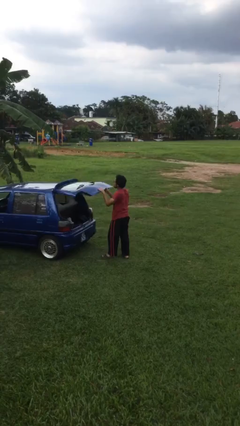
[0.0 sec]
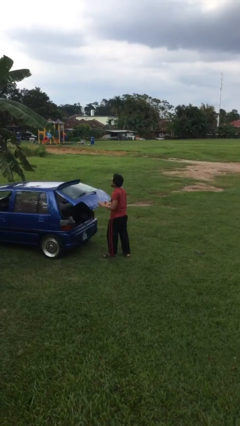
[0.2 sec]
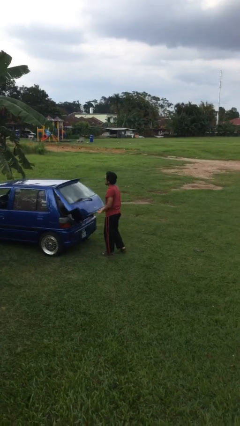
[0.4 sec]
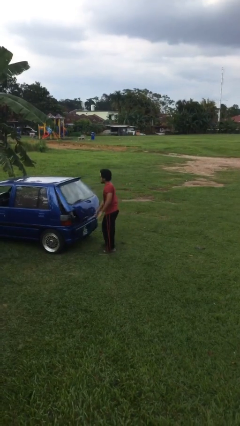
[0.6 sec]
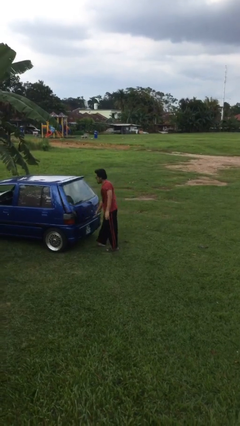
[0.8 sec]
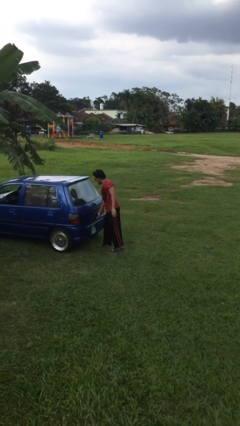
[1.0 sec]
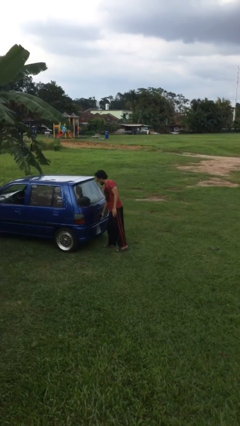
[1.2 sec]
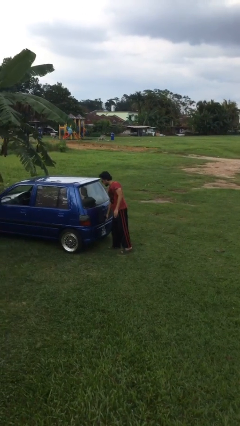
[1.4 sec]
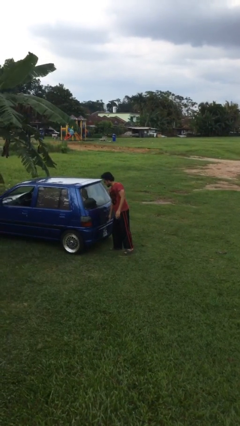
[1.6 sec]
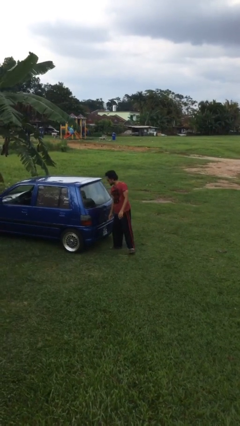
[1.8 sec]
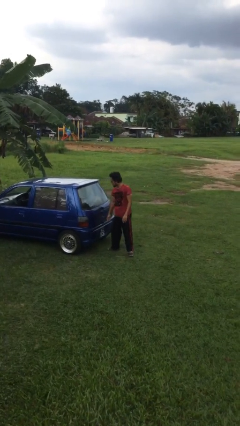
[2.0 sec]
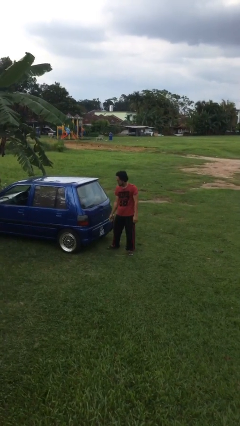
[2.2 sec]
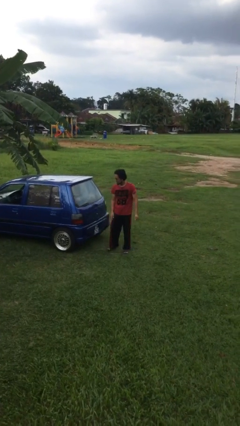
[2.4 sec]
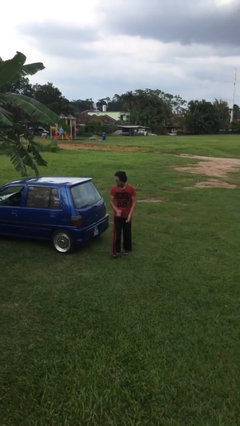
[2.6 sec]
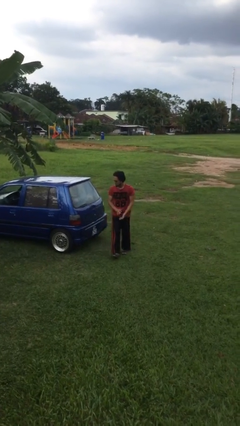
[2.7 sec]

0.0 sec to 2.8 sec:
person closes car trunk

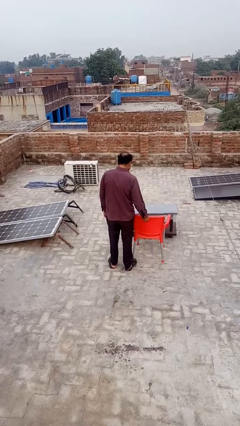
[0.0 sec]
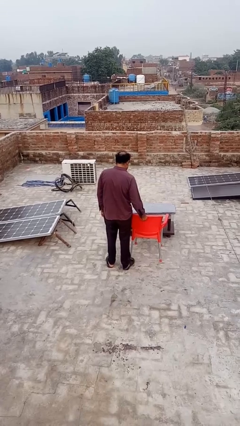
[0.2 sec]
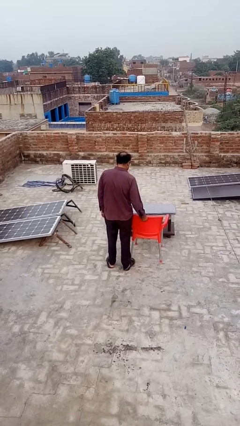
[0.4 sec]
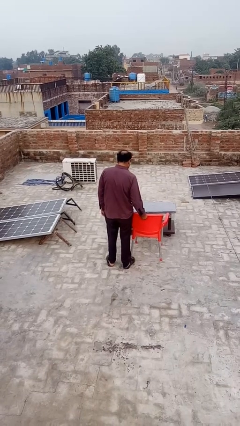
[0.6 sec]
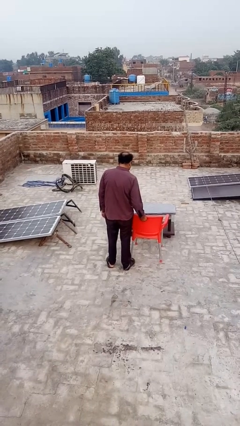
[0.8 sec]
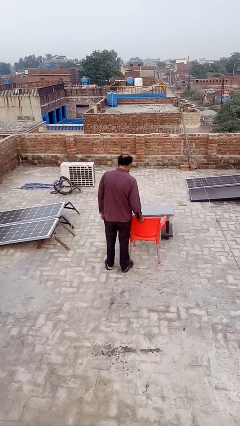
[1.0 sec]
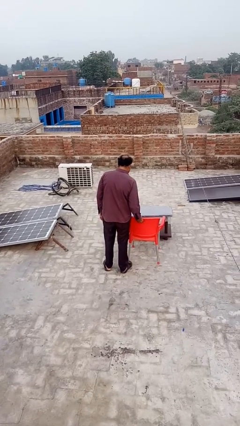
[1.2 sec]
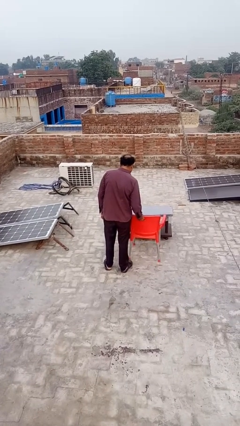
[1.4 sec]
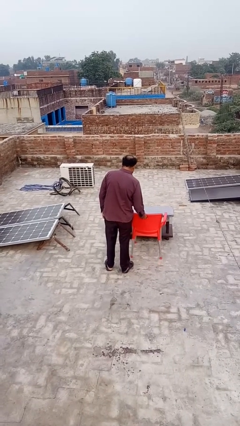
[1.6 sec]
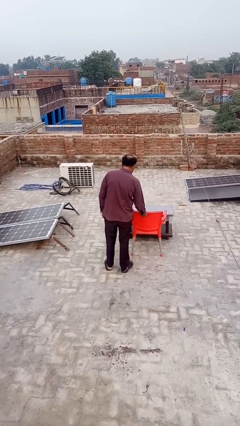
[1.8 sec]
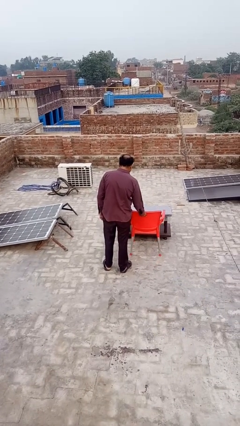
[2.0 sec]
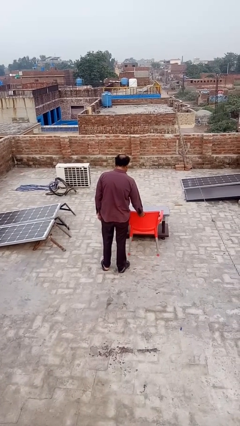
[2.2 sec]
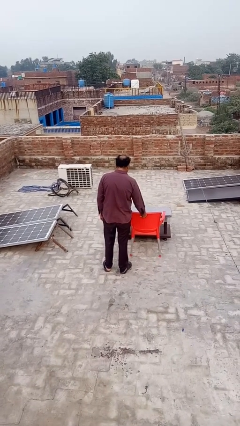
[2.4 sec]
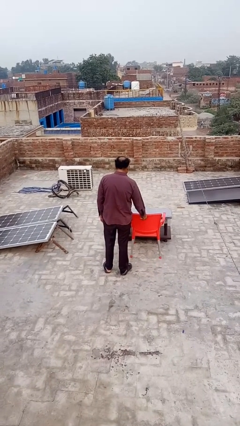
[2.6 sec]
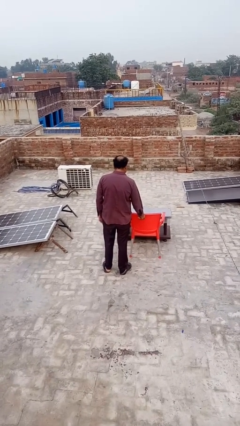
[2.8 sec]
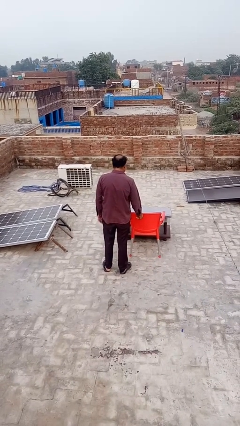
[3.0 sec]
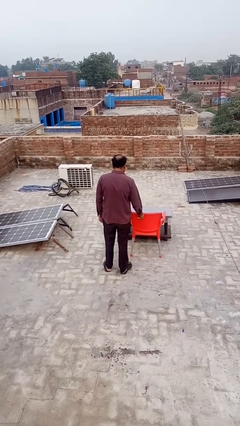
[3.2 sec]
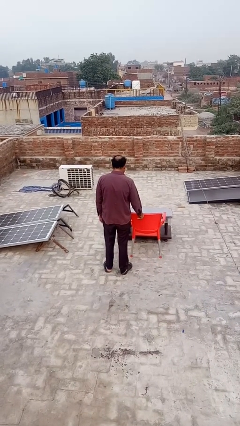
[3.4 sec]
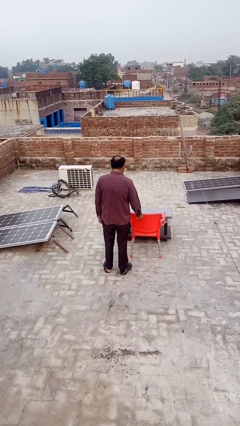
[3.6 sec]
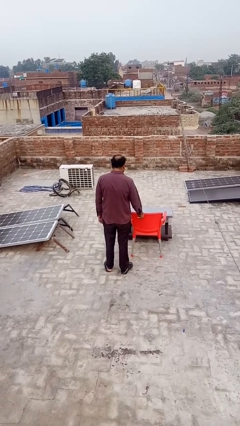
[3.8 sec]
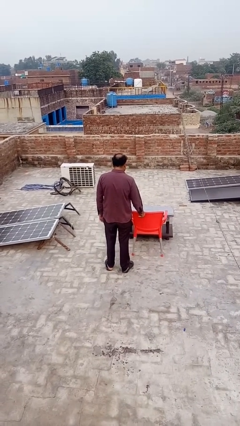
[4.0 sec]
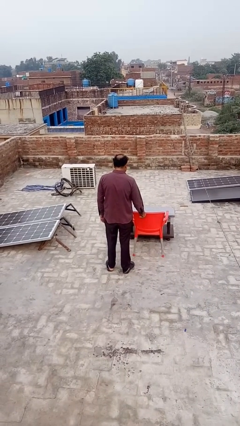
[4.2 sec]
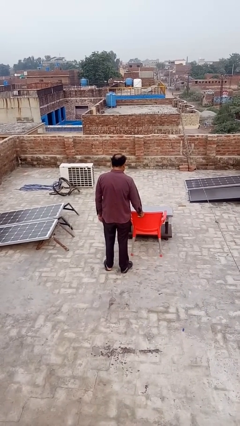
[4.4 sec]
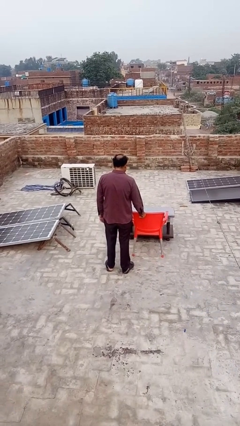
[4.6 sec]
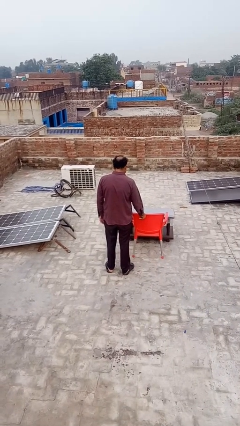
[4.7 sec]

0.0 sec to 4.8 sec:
person pushes in chair

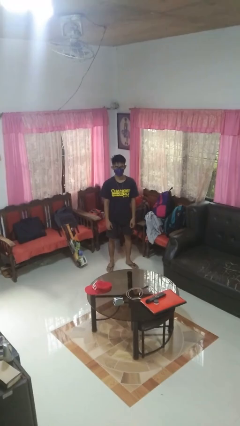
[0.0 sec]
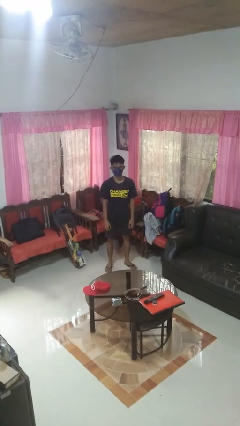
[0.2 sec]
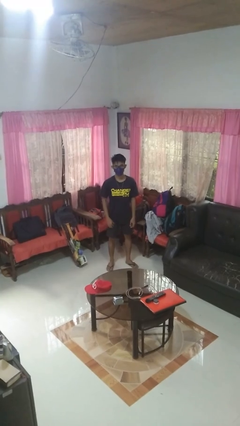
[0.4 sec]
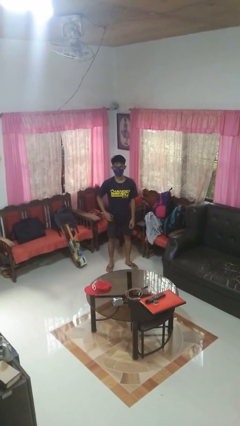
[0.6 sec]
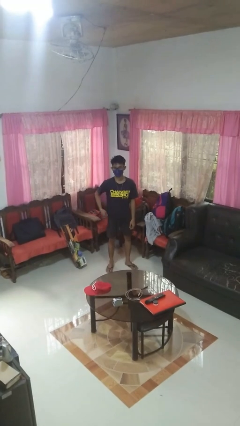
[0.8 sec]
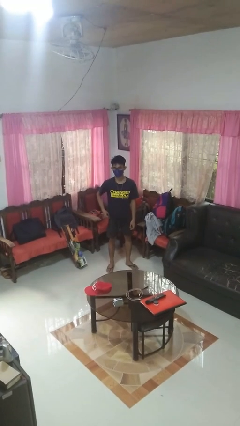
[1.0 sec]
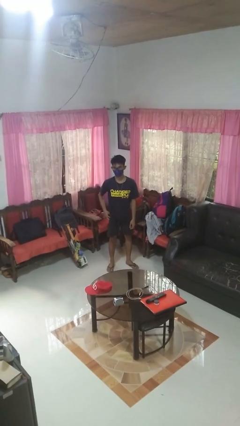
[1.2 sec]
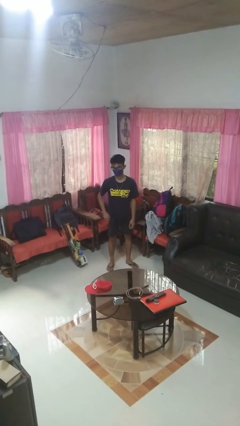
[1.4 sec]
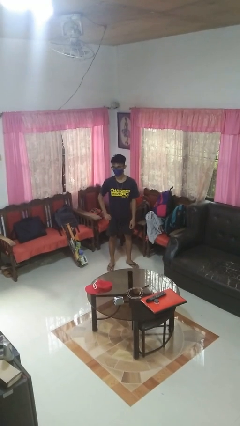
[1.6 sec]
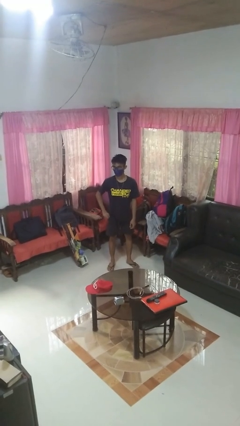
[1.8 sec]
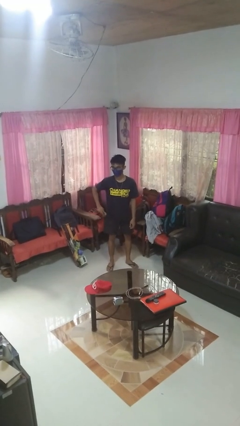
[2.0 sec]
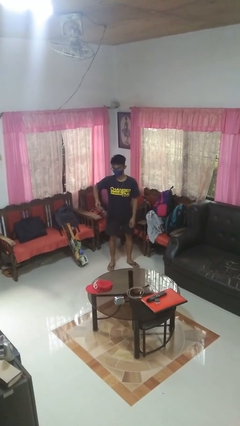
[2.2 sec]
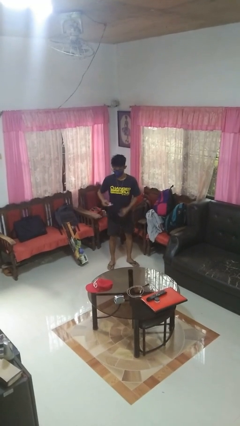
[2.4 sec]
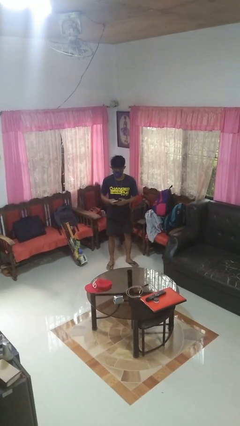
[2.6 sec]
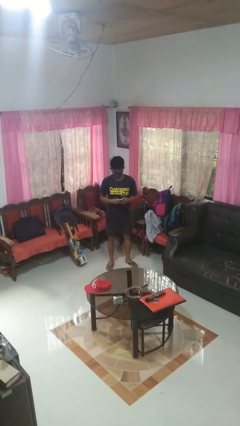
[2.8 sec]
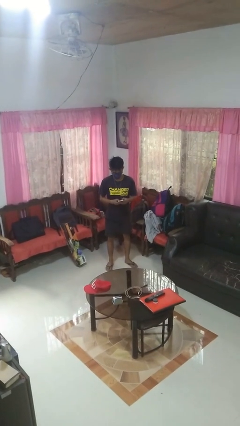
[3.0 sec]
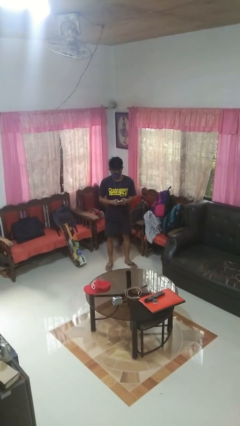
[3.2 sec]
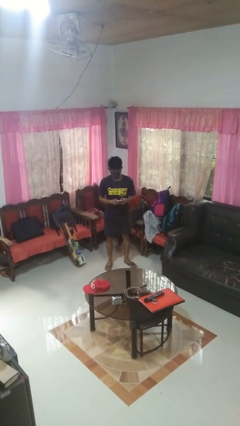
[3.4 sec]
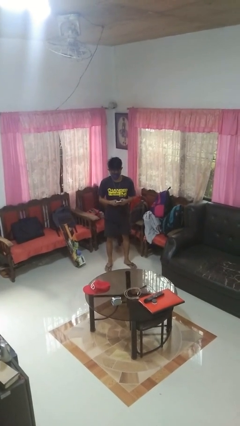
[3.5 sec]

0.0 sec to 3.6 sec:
person takes phone from pocket

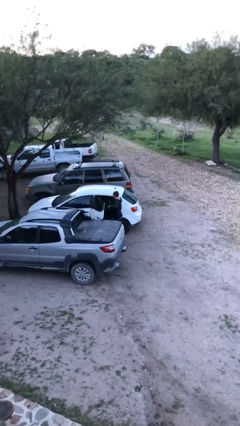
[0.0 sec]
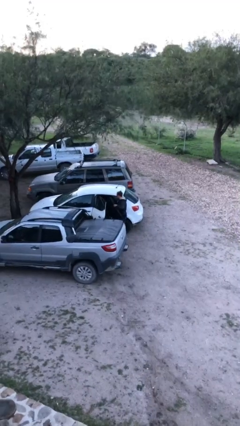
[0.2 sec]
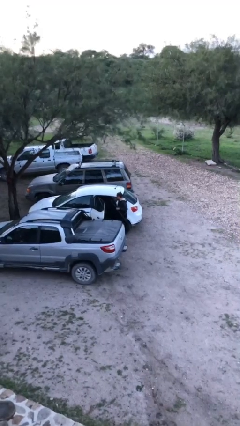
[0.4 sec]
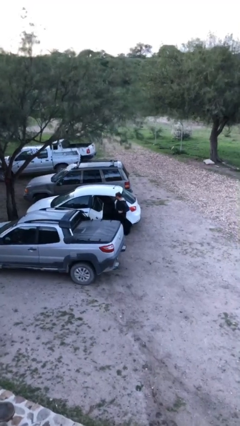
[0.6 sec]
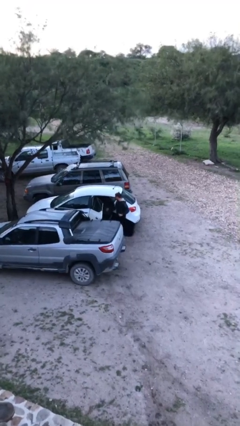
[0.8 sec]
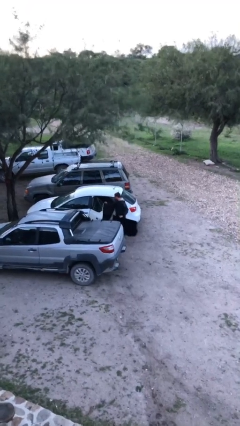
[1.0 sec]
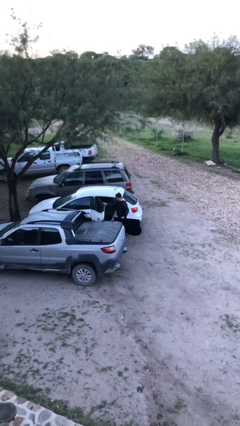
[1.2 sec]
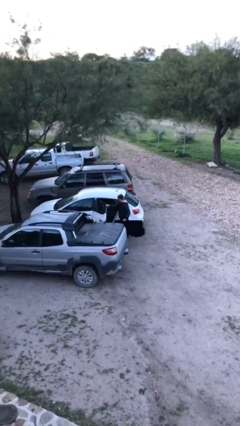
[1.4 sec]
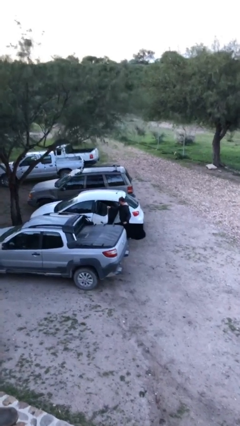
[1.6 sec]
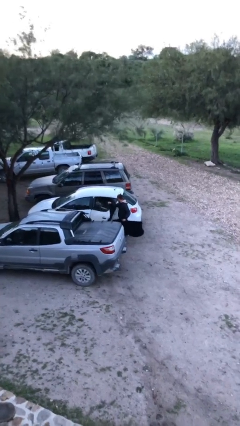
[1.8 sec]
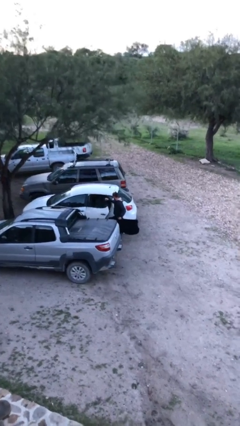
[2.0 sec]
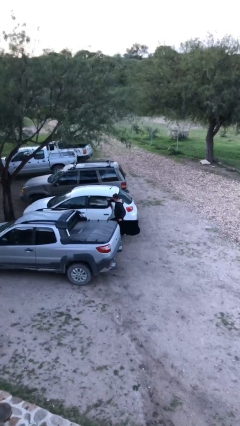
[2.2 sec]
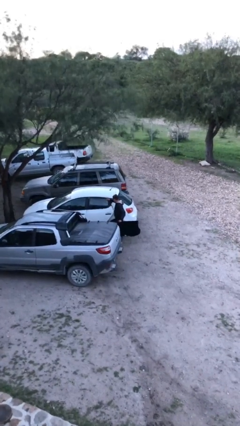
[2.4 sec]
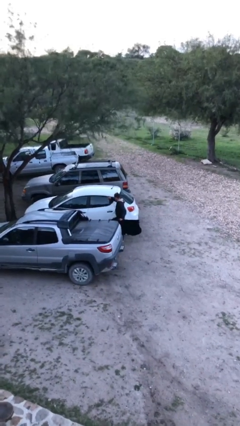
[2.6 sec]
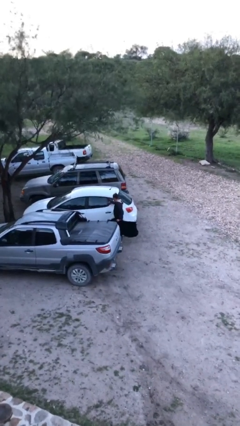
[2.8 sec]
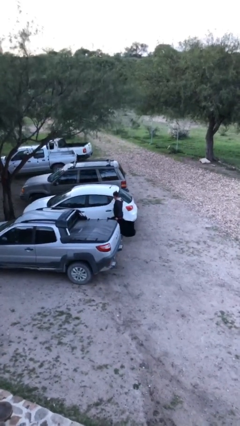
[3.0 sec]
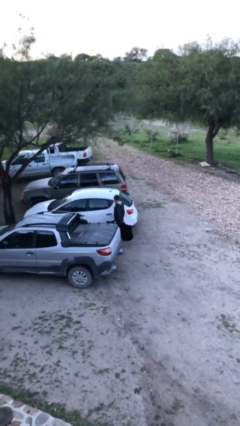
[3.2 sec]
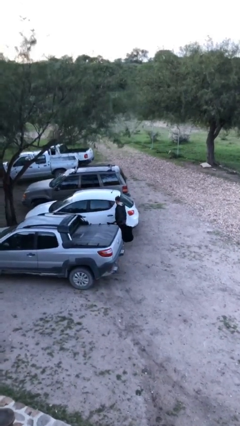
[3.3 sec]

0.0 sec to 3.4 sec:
person closes car door

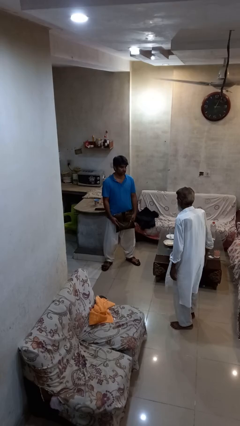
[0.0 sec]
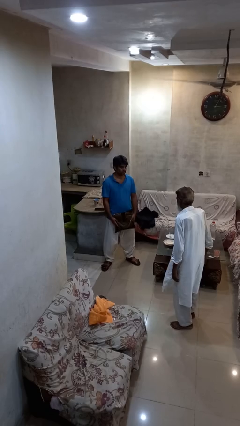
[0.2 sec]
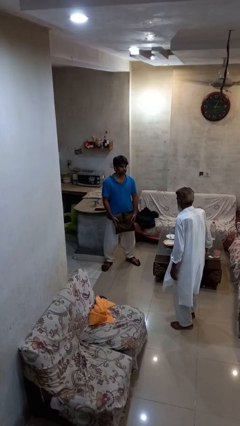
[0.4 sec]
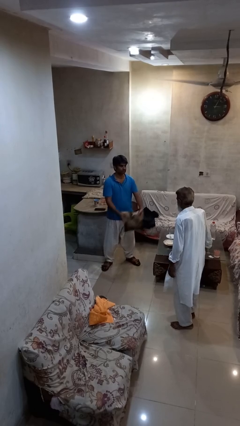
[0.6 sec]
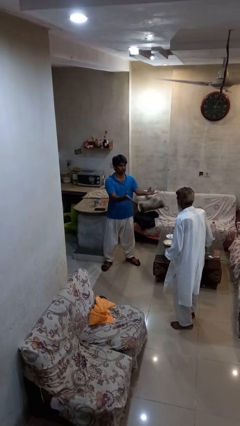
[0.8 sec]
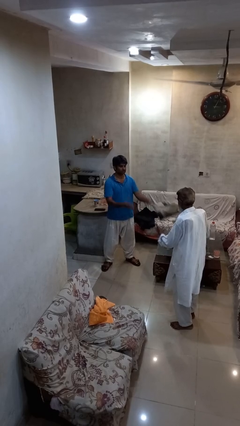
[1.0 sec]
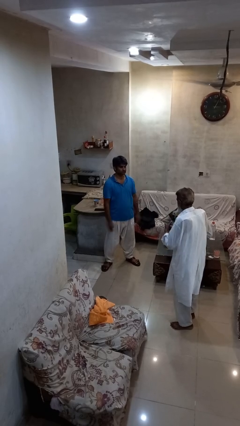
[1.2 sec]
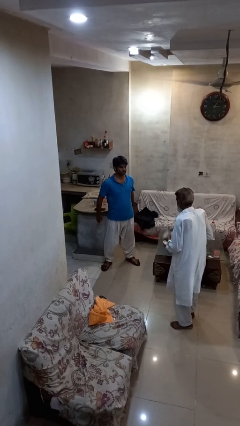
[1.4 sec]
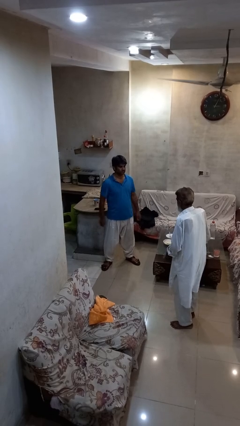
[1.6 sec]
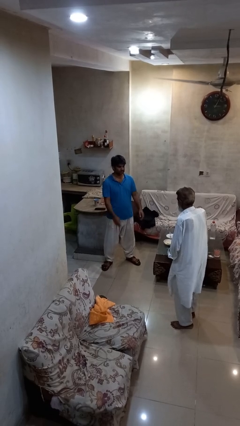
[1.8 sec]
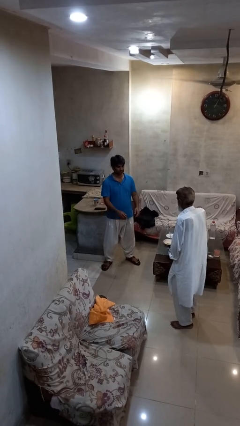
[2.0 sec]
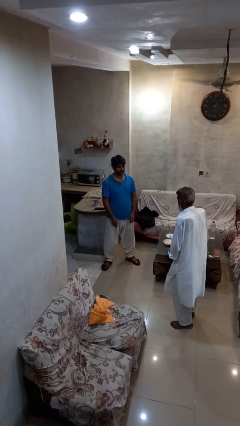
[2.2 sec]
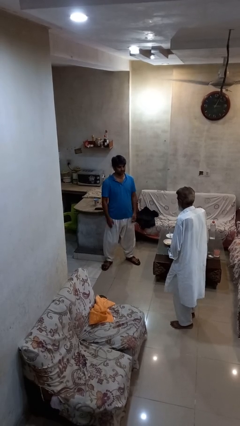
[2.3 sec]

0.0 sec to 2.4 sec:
person throws object to person

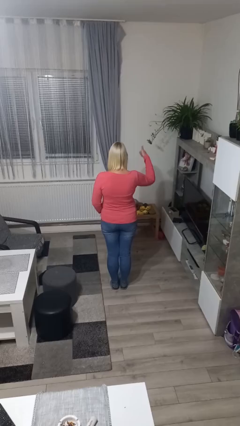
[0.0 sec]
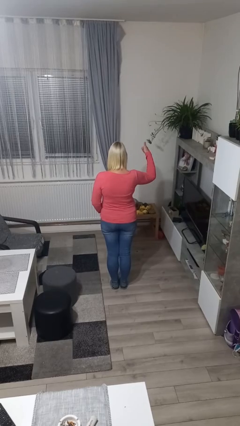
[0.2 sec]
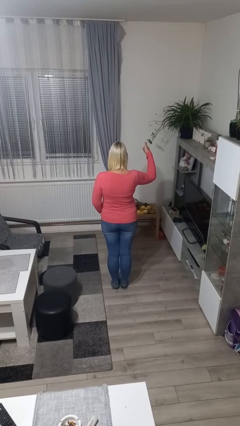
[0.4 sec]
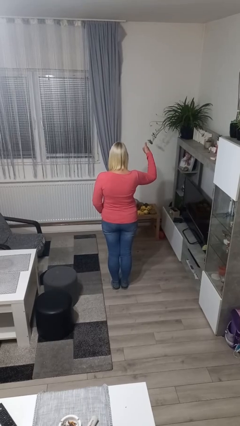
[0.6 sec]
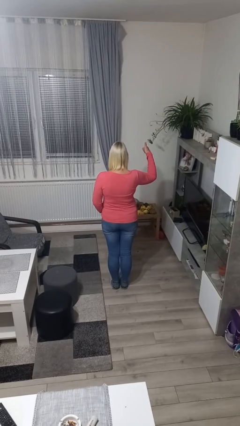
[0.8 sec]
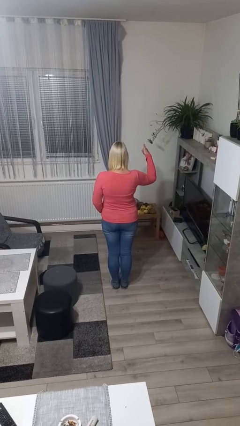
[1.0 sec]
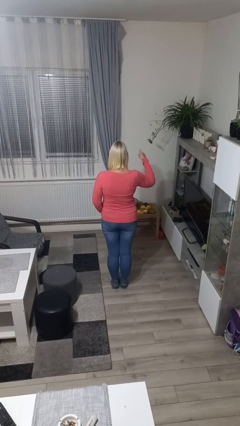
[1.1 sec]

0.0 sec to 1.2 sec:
person gestures number one
